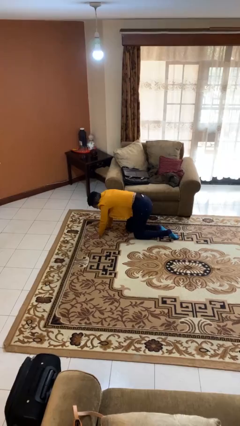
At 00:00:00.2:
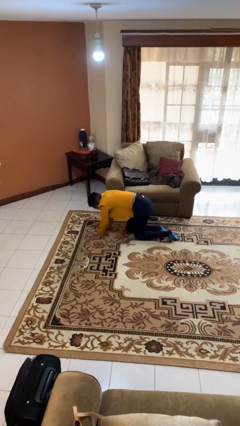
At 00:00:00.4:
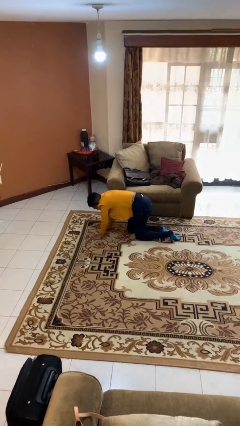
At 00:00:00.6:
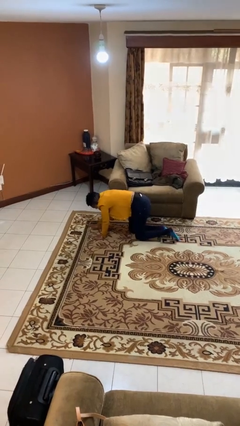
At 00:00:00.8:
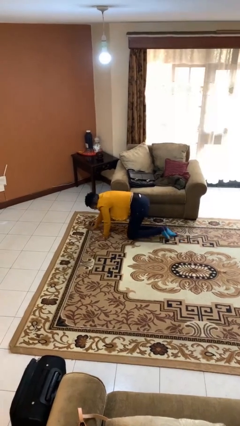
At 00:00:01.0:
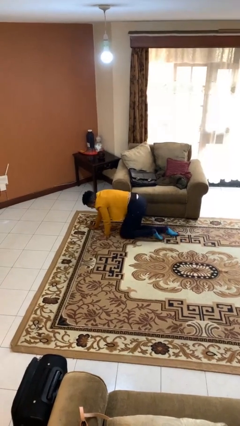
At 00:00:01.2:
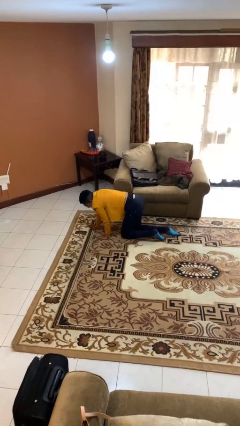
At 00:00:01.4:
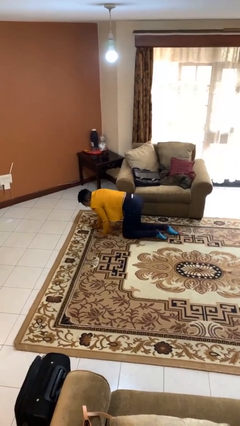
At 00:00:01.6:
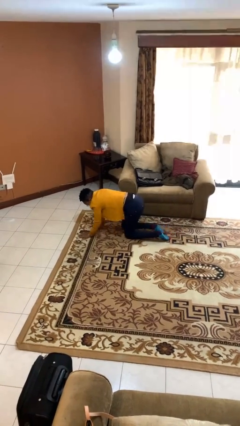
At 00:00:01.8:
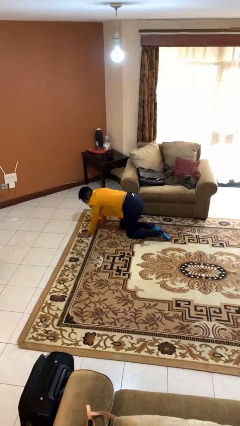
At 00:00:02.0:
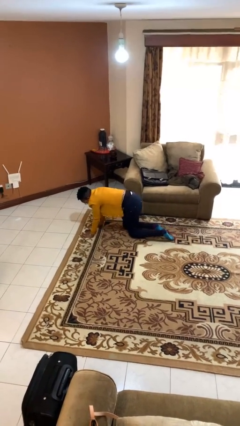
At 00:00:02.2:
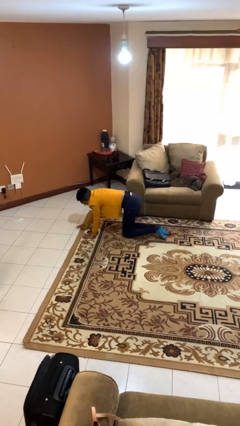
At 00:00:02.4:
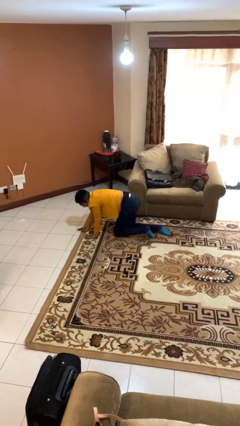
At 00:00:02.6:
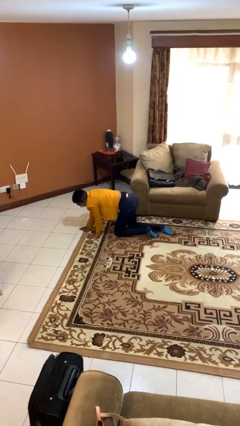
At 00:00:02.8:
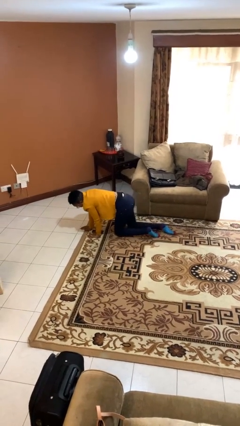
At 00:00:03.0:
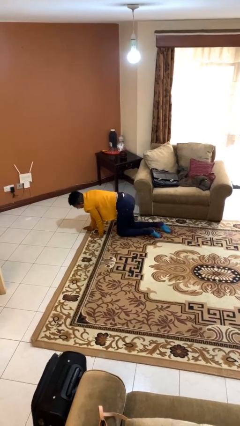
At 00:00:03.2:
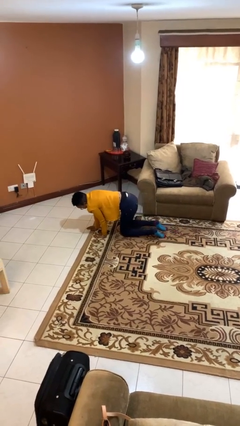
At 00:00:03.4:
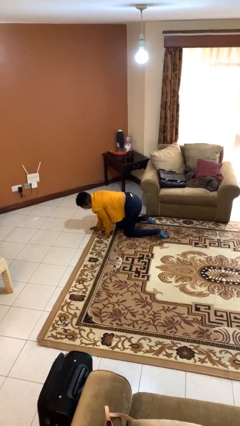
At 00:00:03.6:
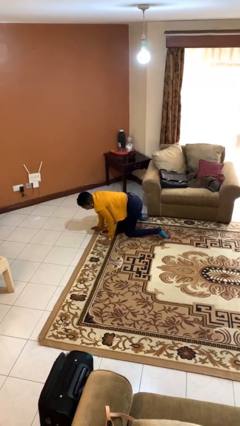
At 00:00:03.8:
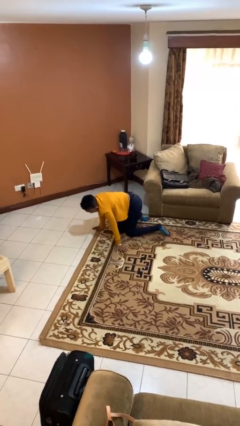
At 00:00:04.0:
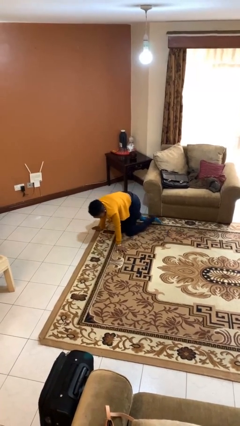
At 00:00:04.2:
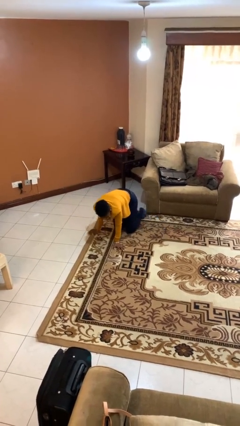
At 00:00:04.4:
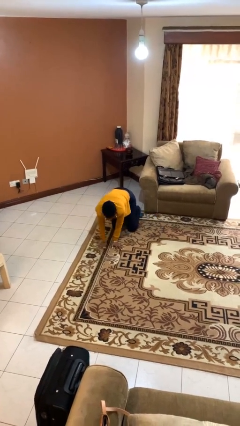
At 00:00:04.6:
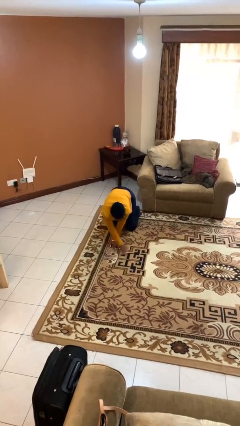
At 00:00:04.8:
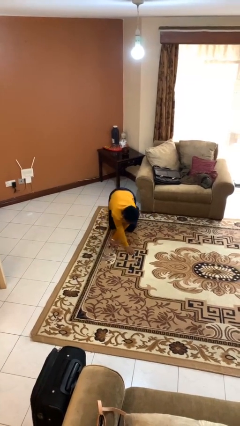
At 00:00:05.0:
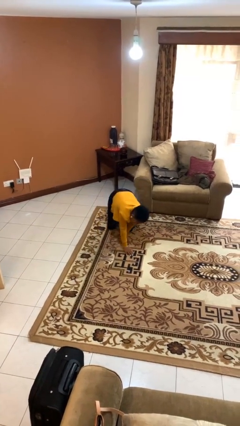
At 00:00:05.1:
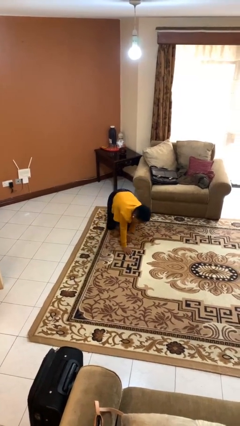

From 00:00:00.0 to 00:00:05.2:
person crawls

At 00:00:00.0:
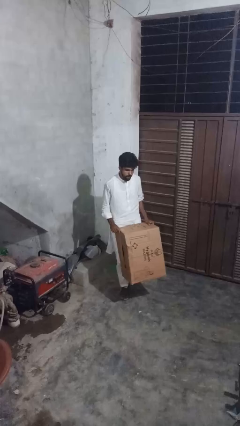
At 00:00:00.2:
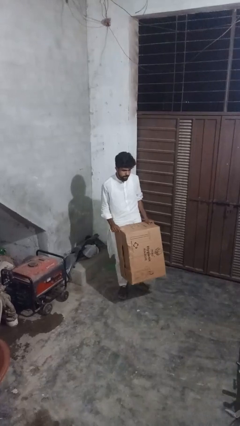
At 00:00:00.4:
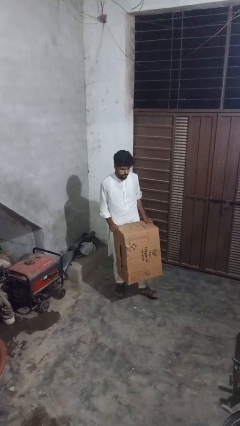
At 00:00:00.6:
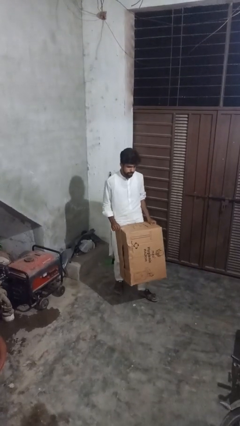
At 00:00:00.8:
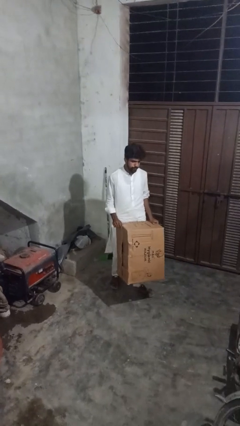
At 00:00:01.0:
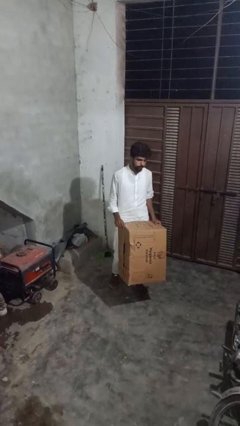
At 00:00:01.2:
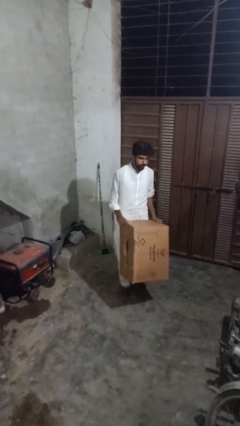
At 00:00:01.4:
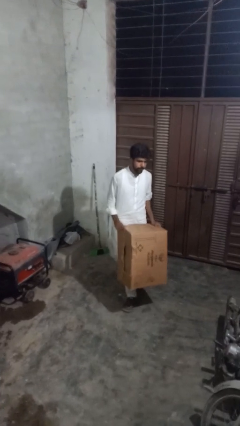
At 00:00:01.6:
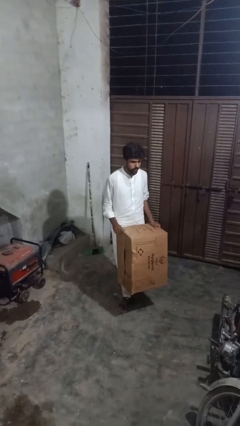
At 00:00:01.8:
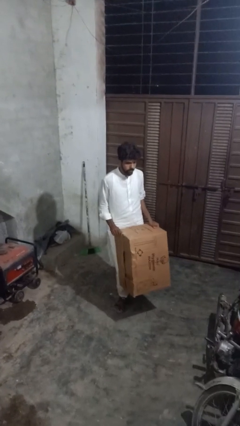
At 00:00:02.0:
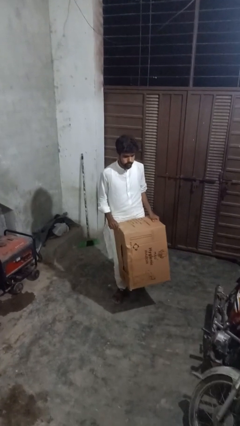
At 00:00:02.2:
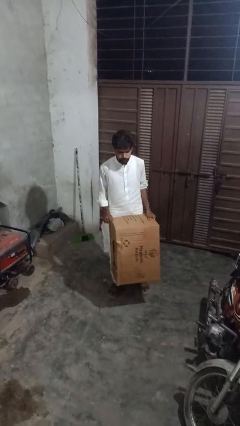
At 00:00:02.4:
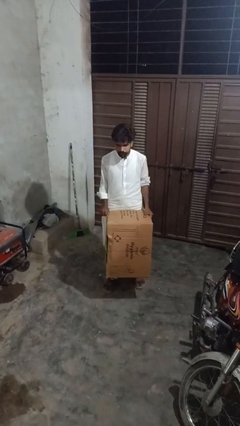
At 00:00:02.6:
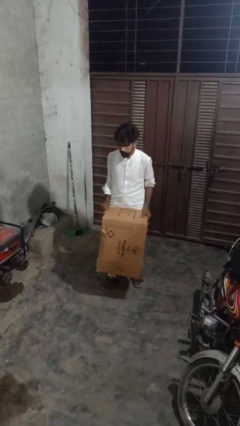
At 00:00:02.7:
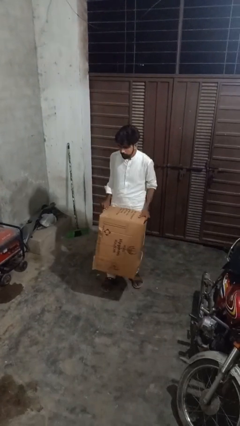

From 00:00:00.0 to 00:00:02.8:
person carries laundry basket

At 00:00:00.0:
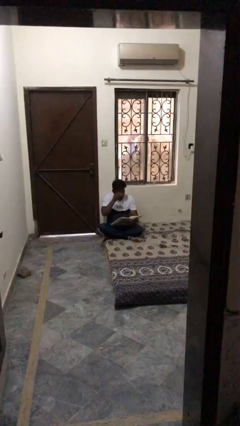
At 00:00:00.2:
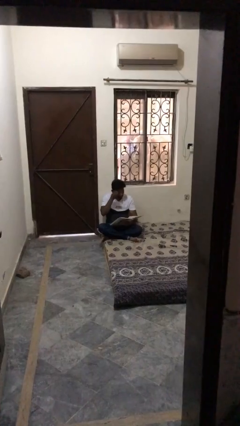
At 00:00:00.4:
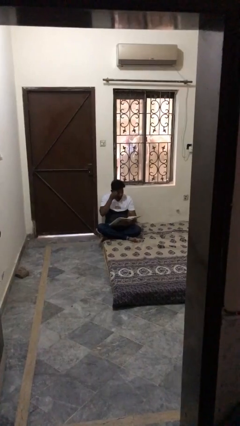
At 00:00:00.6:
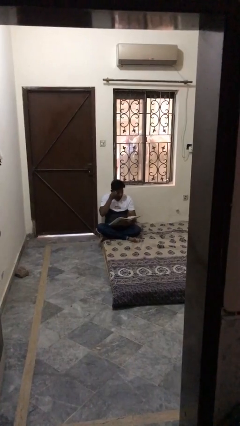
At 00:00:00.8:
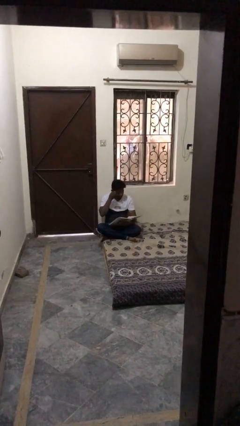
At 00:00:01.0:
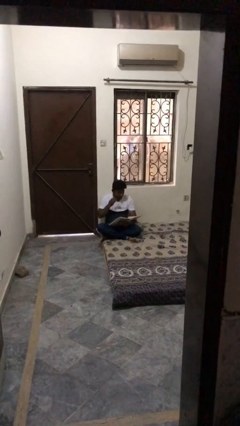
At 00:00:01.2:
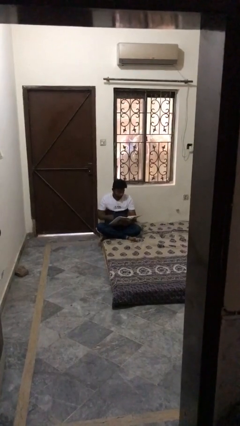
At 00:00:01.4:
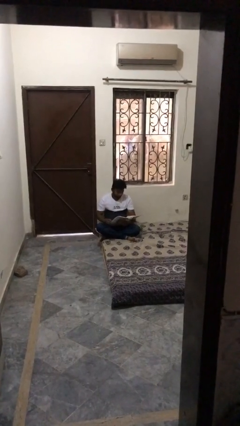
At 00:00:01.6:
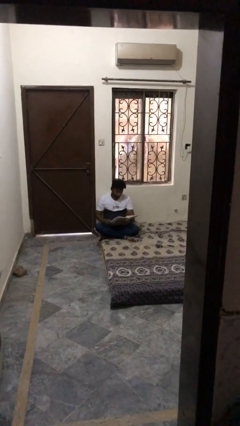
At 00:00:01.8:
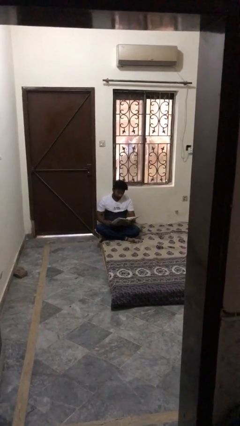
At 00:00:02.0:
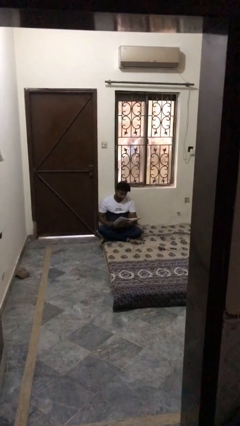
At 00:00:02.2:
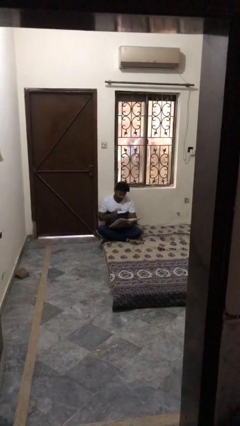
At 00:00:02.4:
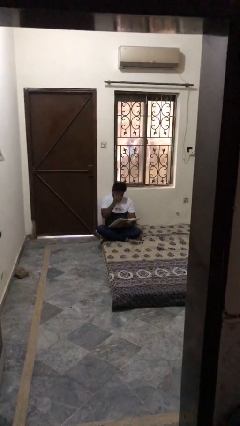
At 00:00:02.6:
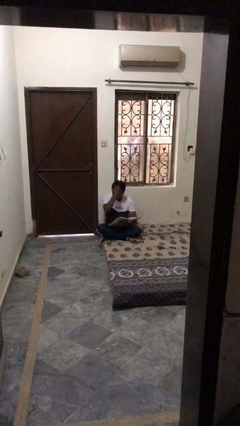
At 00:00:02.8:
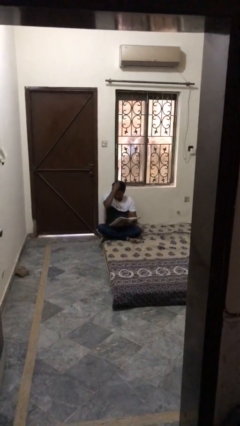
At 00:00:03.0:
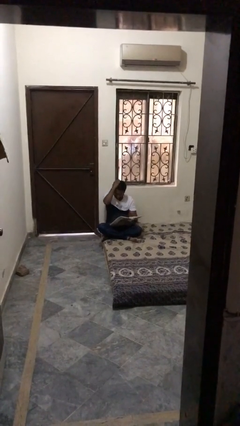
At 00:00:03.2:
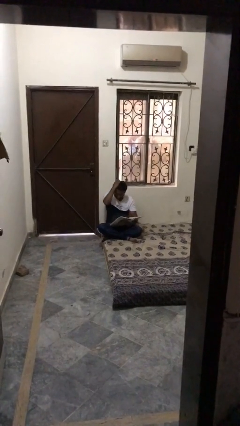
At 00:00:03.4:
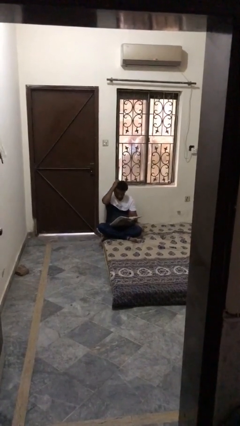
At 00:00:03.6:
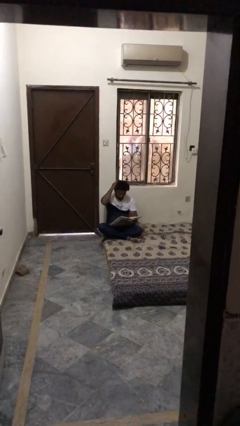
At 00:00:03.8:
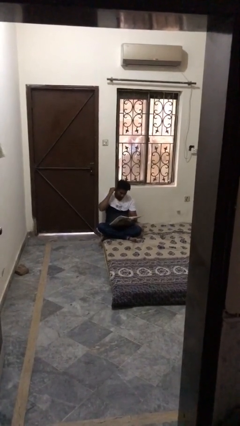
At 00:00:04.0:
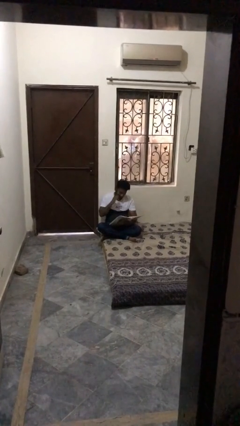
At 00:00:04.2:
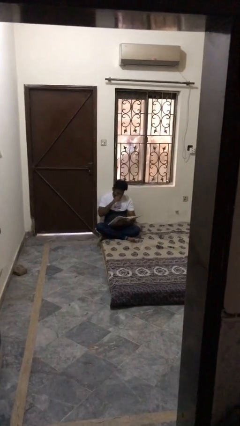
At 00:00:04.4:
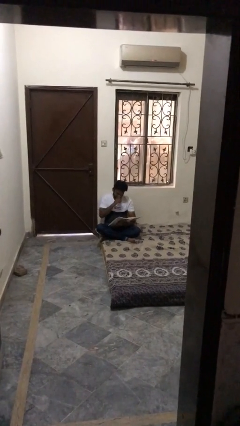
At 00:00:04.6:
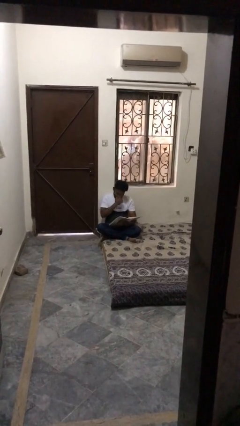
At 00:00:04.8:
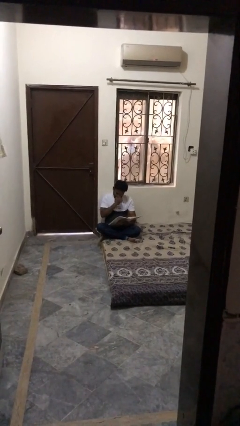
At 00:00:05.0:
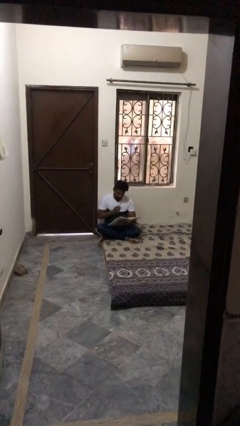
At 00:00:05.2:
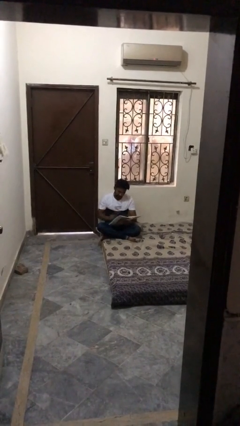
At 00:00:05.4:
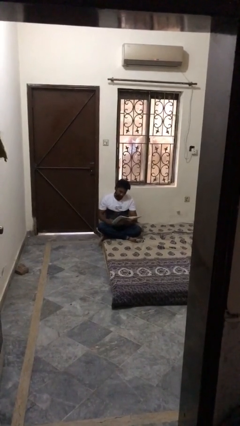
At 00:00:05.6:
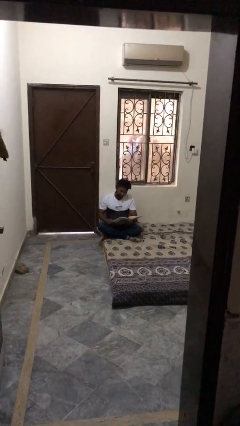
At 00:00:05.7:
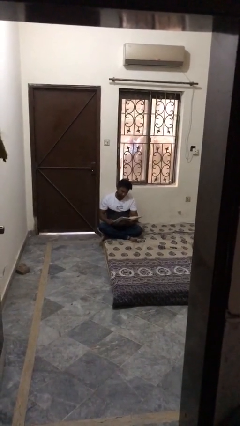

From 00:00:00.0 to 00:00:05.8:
person reads document

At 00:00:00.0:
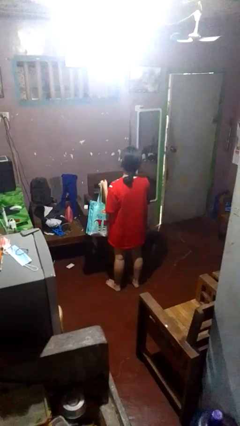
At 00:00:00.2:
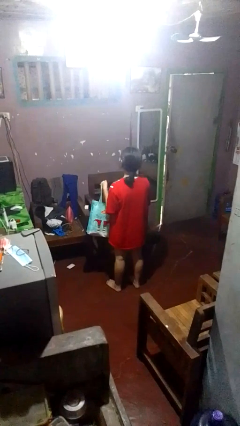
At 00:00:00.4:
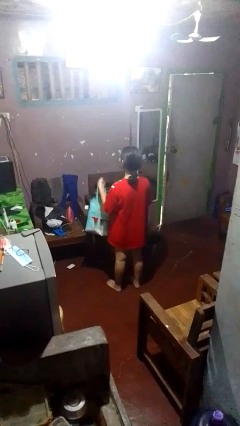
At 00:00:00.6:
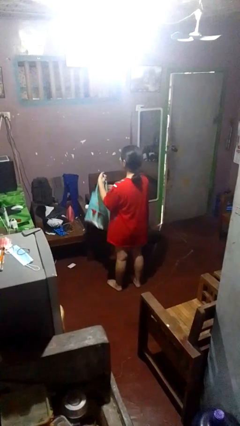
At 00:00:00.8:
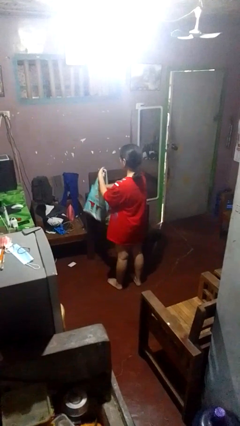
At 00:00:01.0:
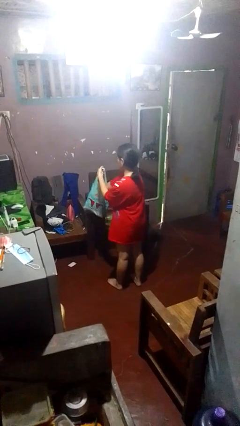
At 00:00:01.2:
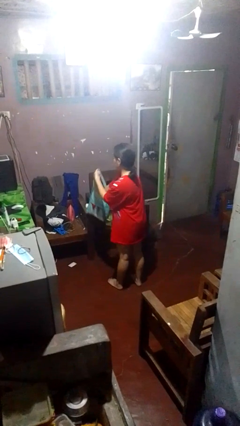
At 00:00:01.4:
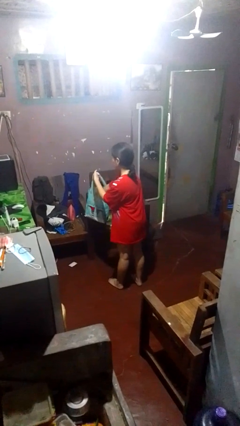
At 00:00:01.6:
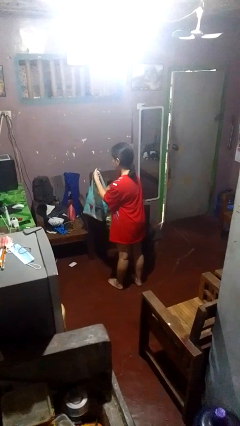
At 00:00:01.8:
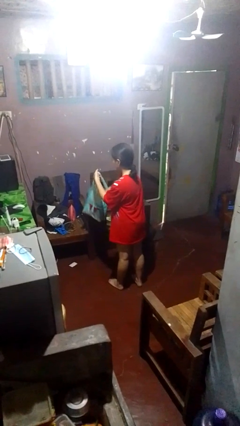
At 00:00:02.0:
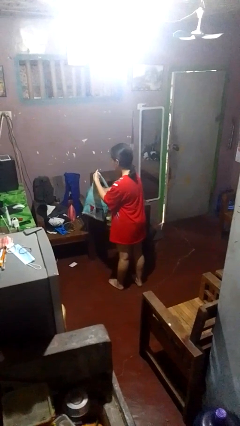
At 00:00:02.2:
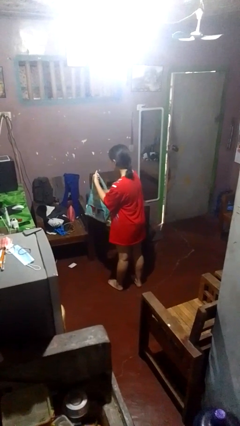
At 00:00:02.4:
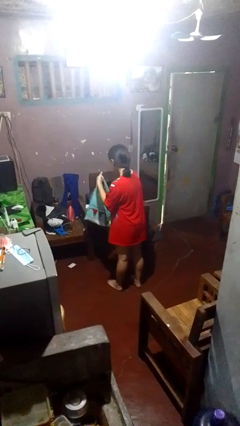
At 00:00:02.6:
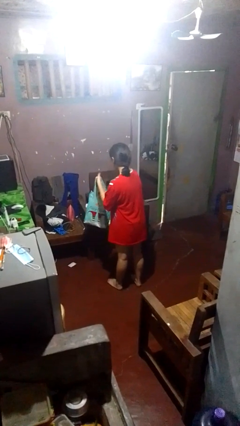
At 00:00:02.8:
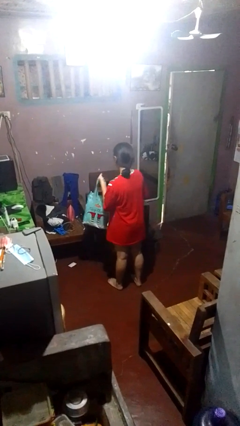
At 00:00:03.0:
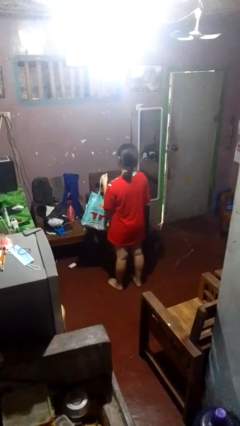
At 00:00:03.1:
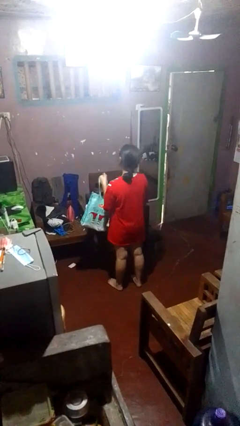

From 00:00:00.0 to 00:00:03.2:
person searches in bag

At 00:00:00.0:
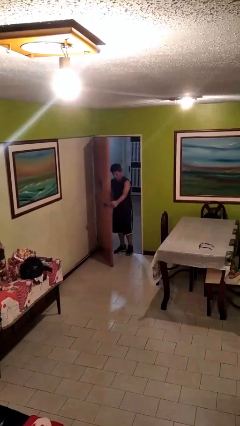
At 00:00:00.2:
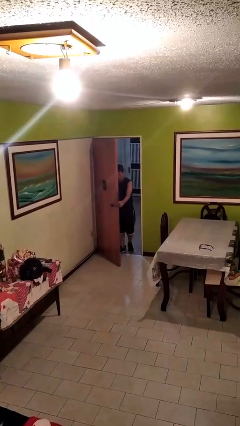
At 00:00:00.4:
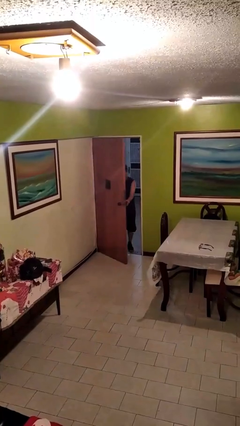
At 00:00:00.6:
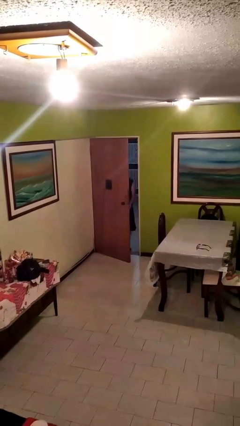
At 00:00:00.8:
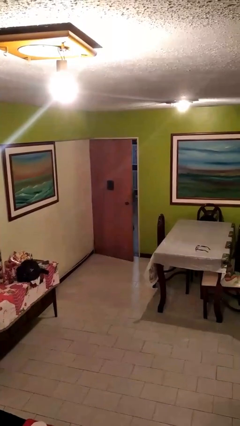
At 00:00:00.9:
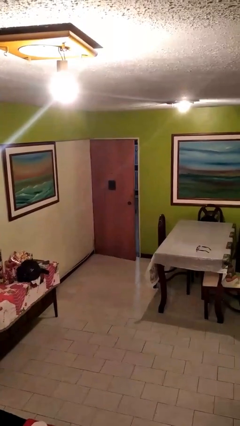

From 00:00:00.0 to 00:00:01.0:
person closes facility door
